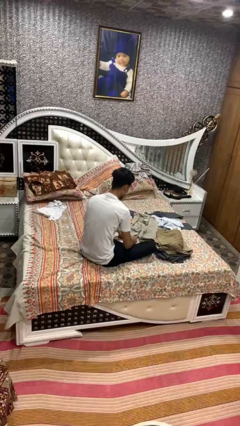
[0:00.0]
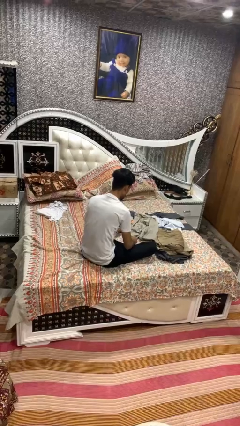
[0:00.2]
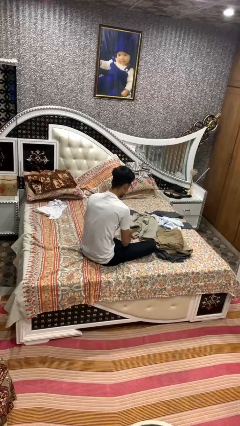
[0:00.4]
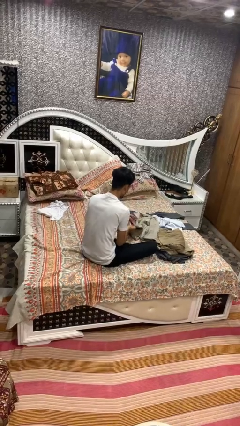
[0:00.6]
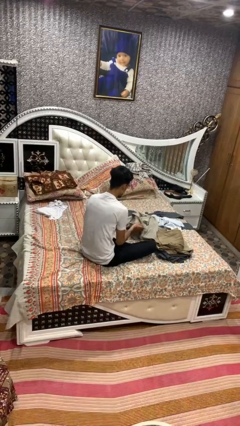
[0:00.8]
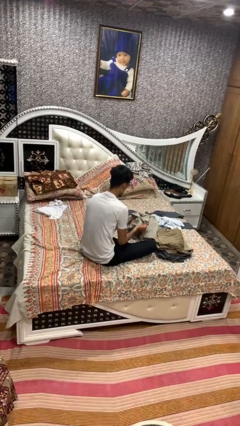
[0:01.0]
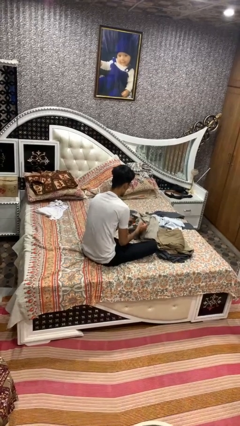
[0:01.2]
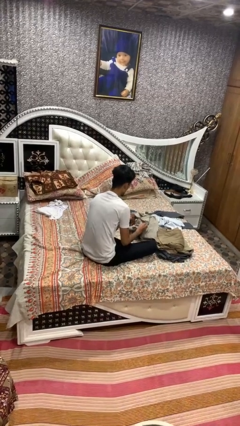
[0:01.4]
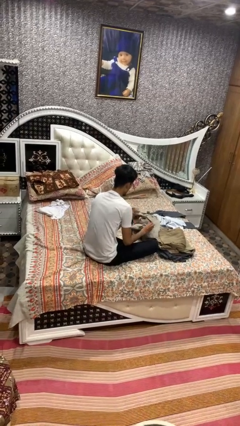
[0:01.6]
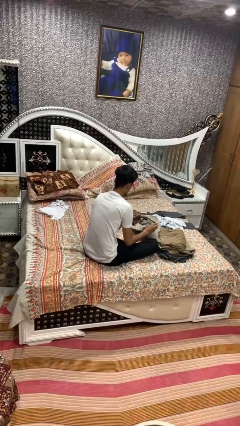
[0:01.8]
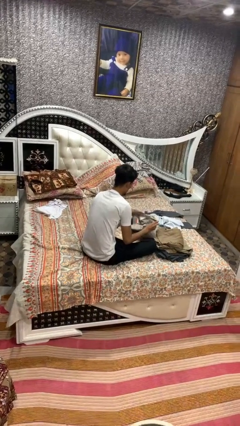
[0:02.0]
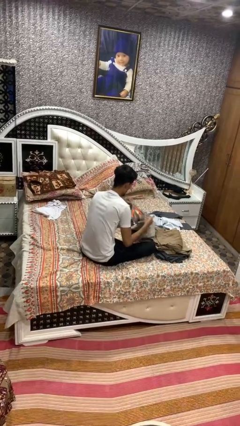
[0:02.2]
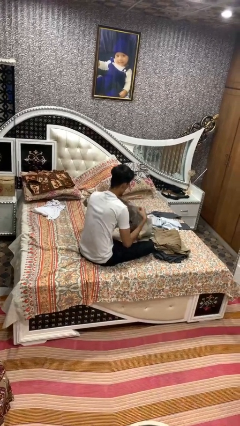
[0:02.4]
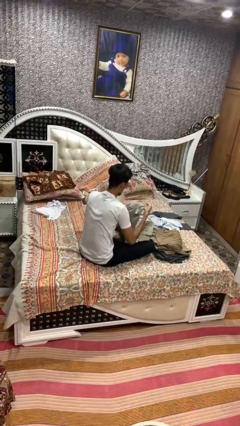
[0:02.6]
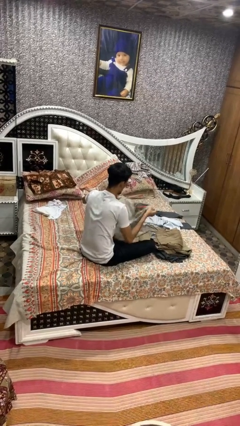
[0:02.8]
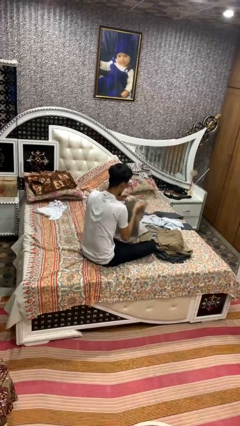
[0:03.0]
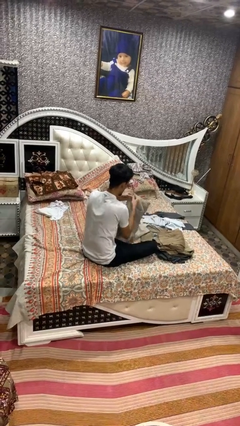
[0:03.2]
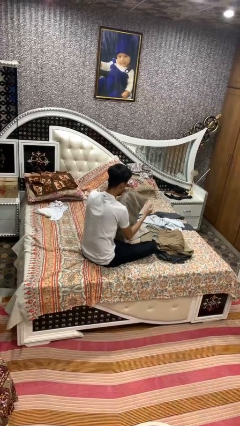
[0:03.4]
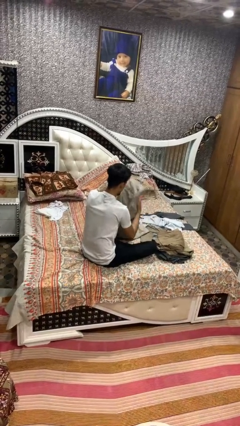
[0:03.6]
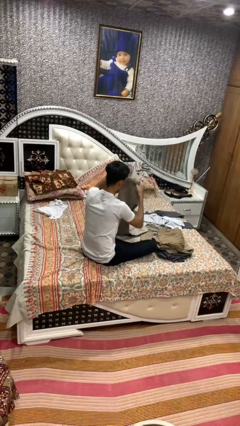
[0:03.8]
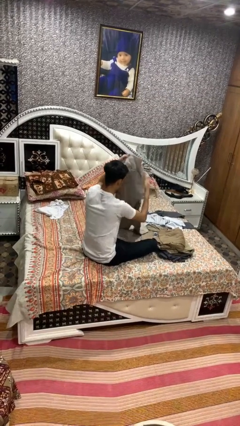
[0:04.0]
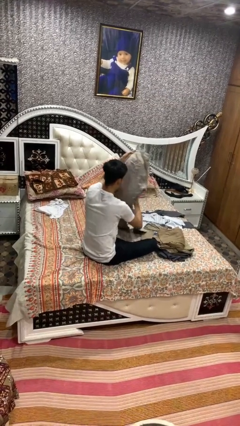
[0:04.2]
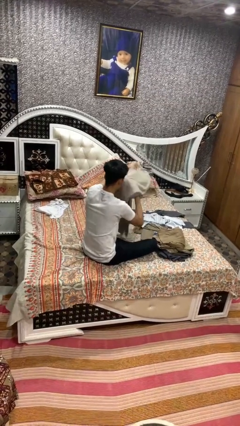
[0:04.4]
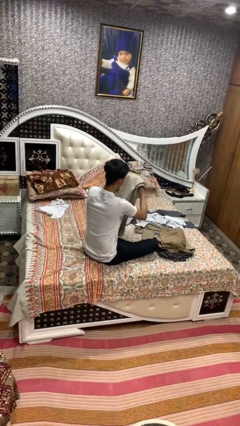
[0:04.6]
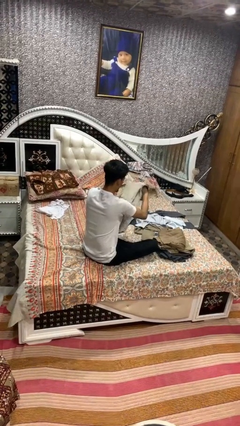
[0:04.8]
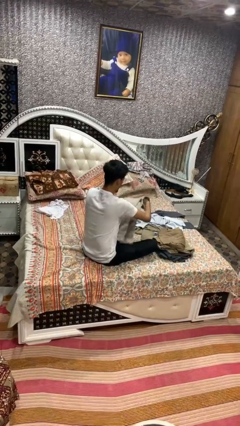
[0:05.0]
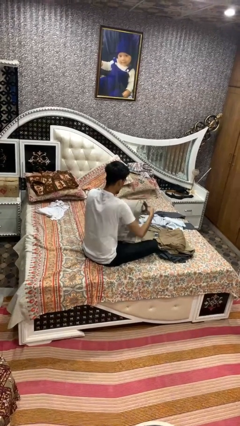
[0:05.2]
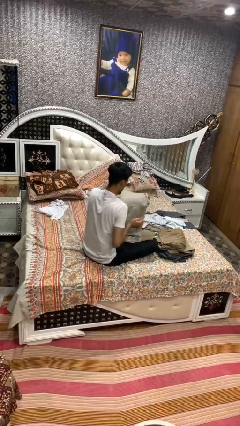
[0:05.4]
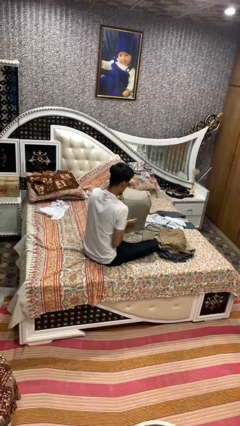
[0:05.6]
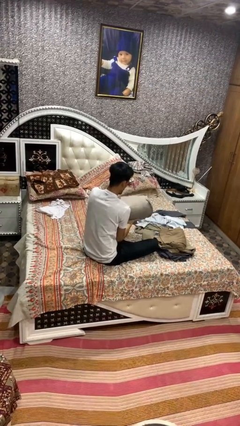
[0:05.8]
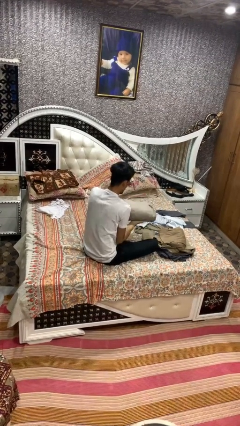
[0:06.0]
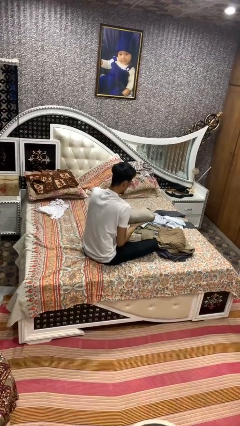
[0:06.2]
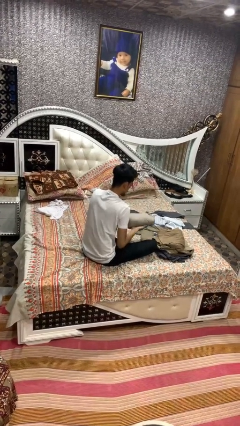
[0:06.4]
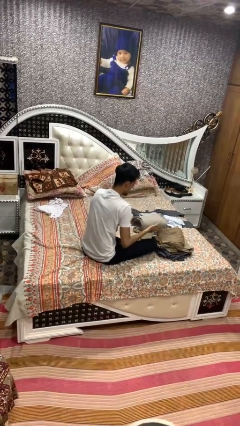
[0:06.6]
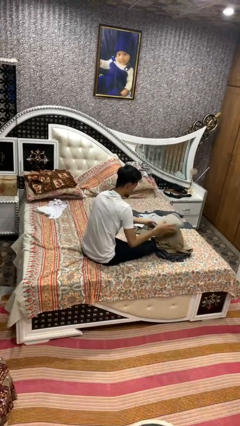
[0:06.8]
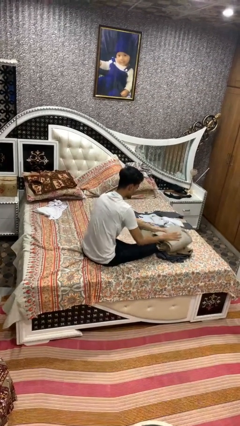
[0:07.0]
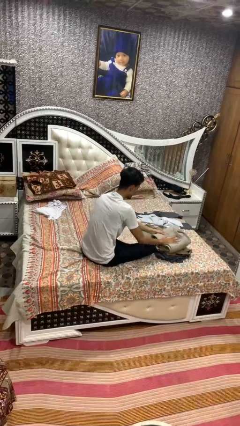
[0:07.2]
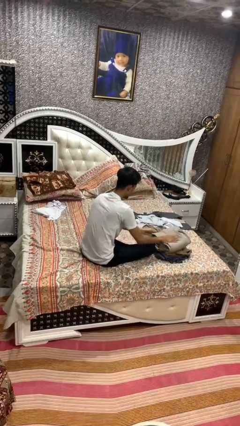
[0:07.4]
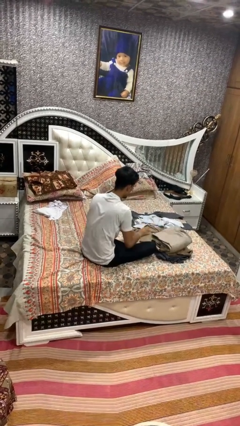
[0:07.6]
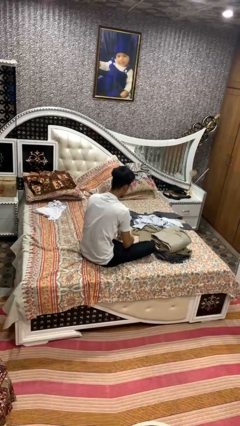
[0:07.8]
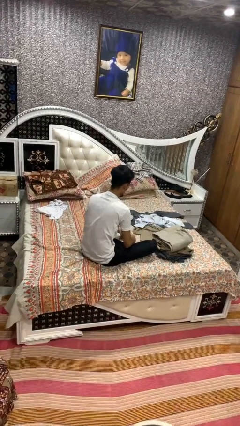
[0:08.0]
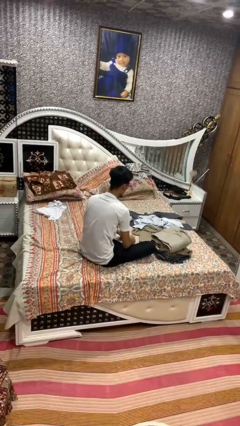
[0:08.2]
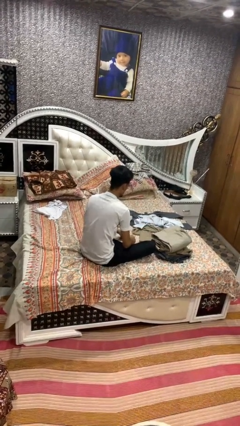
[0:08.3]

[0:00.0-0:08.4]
person folds pants

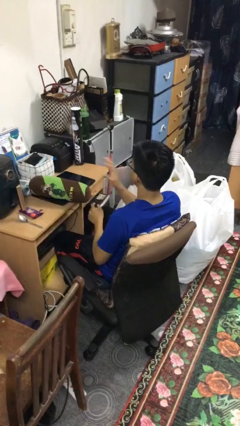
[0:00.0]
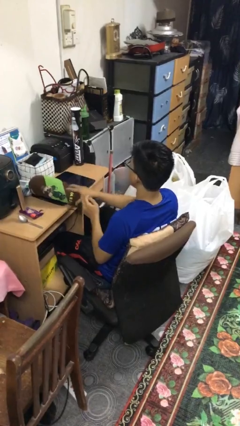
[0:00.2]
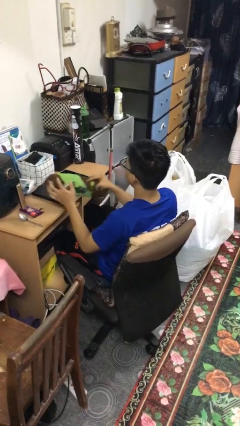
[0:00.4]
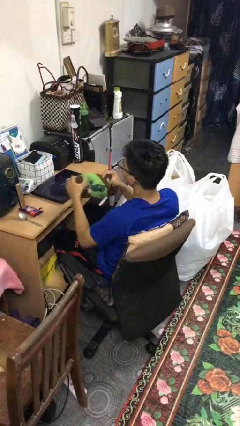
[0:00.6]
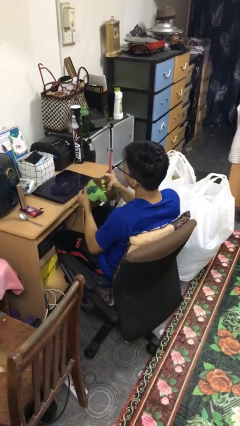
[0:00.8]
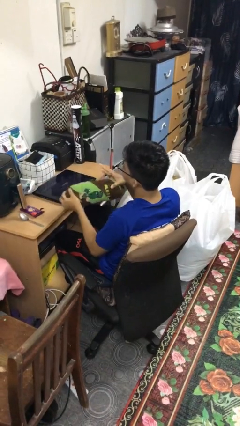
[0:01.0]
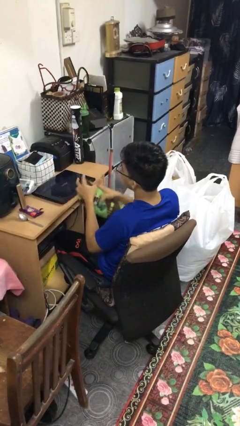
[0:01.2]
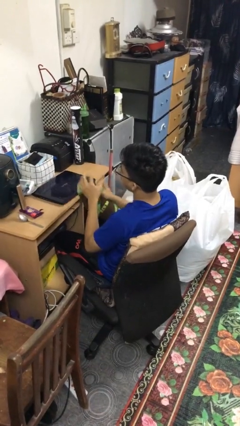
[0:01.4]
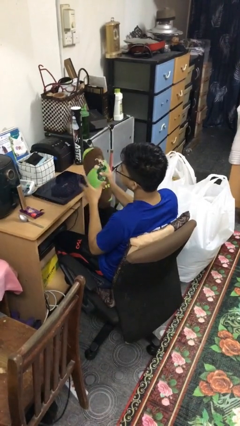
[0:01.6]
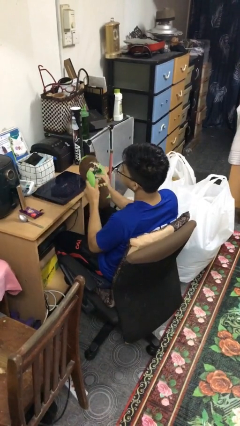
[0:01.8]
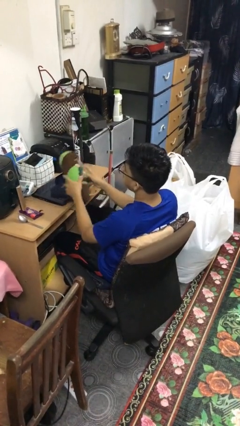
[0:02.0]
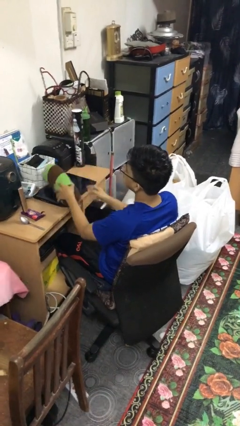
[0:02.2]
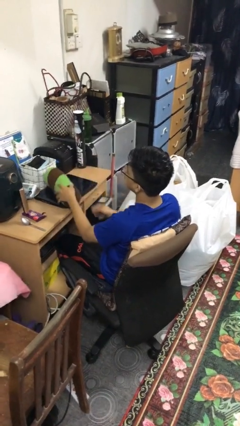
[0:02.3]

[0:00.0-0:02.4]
person squeezes object

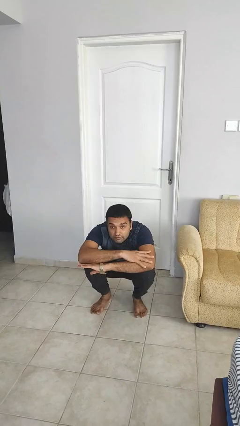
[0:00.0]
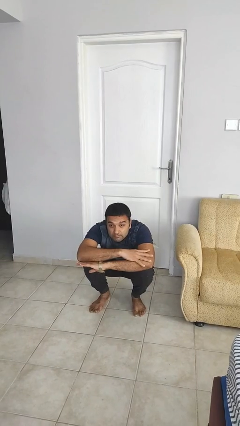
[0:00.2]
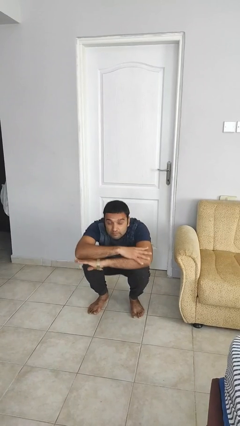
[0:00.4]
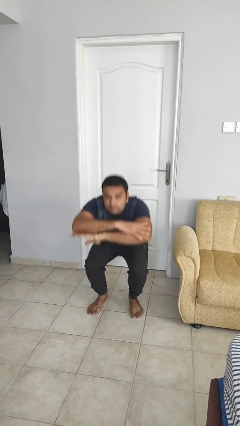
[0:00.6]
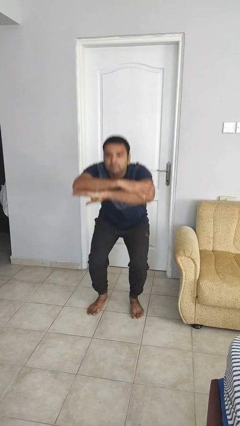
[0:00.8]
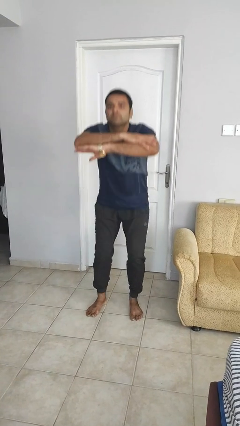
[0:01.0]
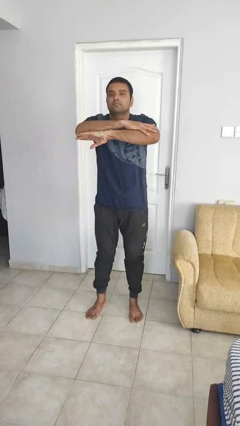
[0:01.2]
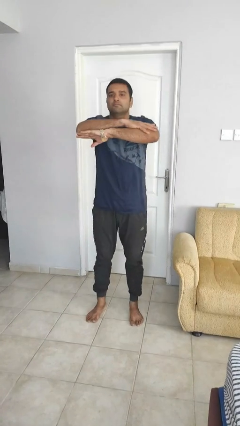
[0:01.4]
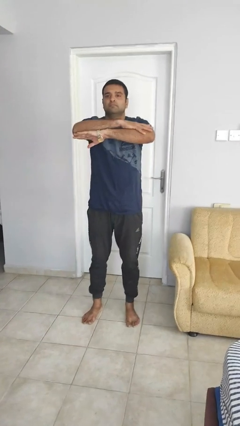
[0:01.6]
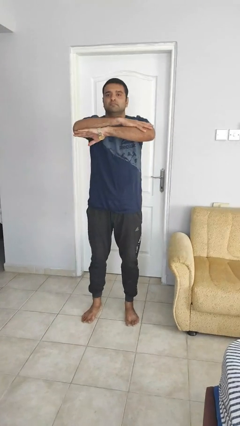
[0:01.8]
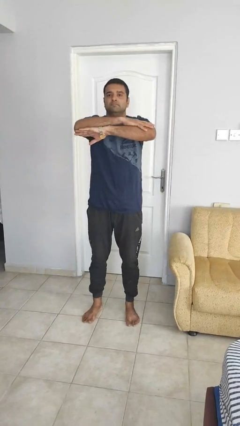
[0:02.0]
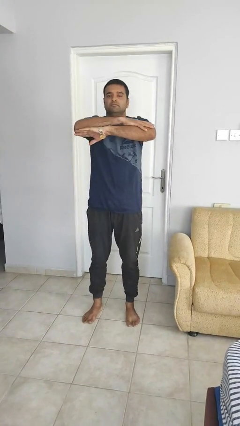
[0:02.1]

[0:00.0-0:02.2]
person stands up

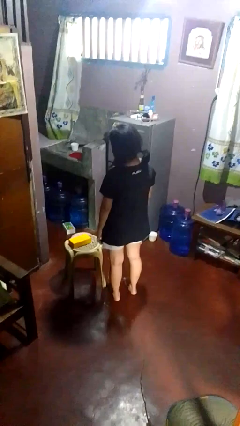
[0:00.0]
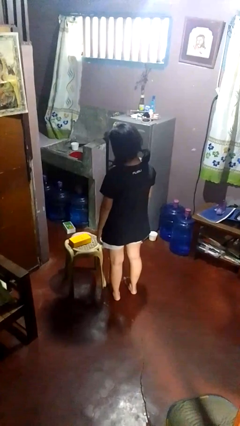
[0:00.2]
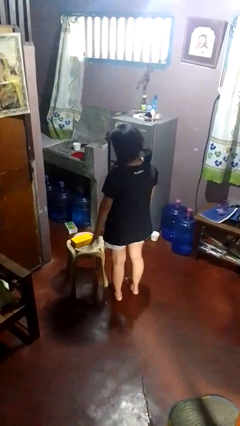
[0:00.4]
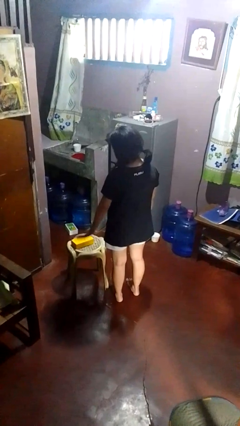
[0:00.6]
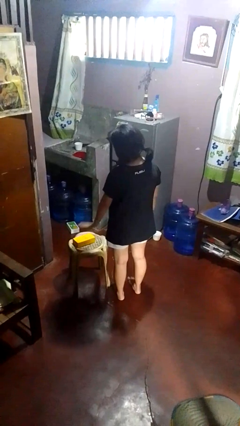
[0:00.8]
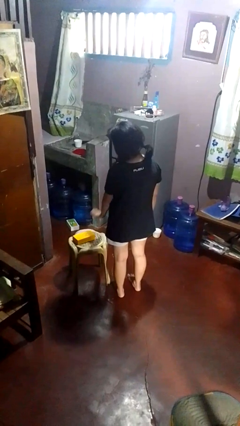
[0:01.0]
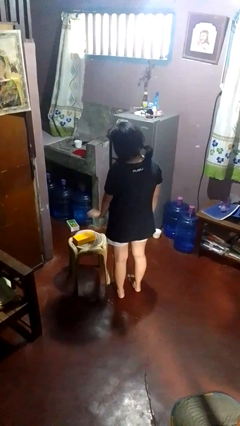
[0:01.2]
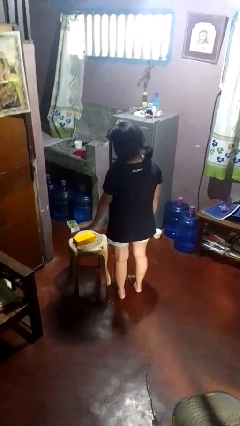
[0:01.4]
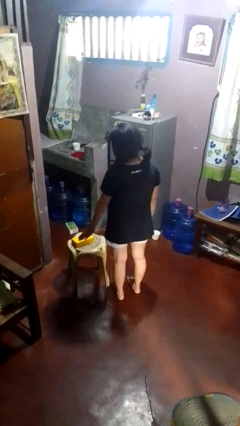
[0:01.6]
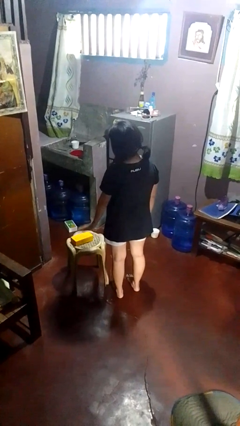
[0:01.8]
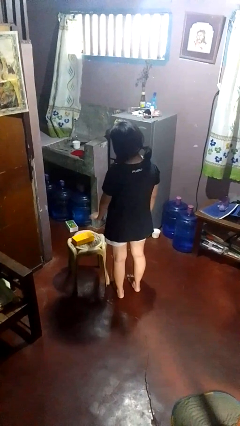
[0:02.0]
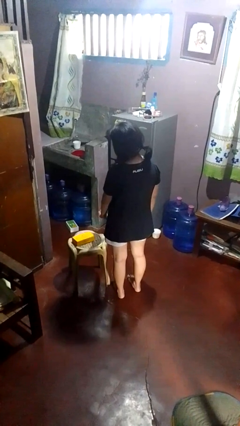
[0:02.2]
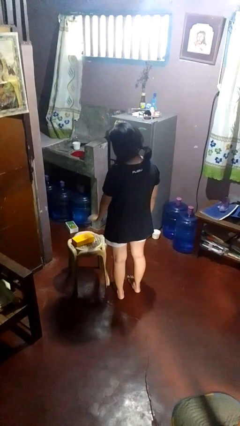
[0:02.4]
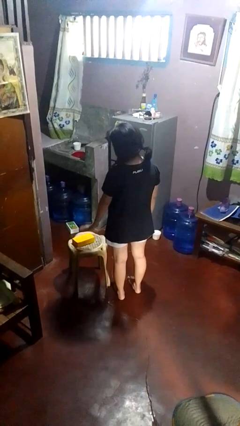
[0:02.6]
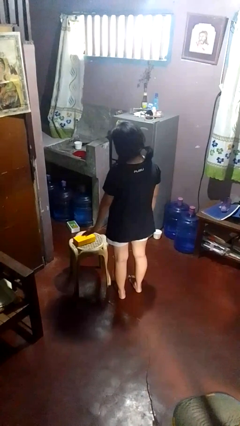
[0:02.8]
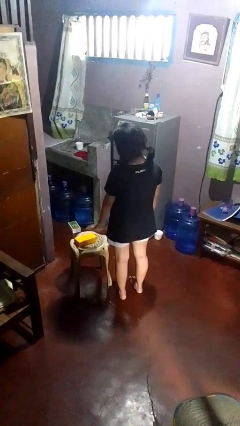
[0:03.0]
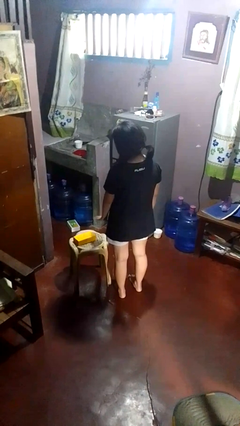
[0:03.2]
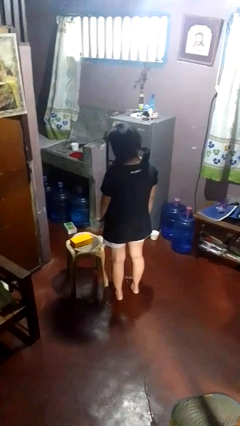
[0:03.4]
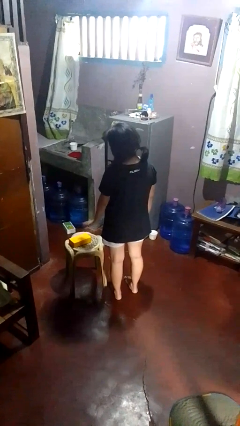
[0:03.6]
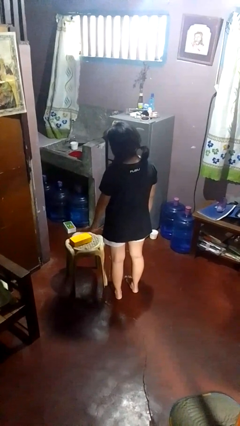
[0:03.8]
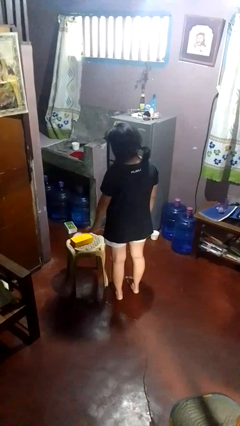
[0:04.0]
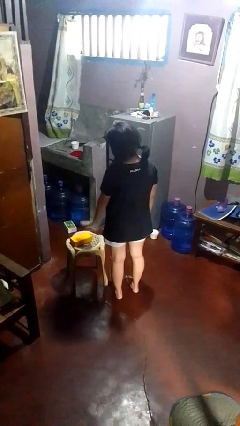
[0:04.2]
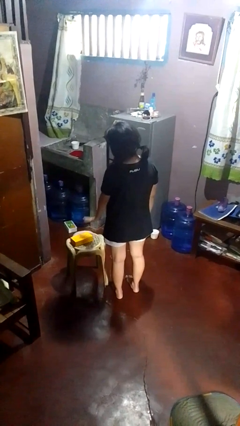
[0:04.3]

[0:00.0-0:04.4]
person waves hand over object
